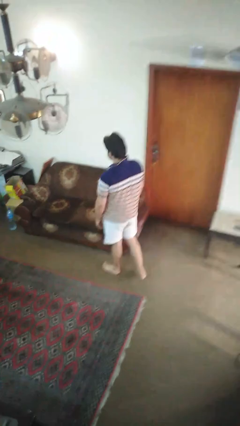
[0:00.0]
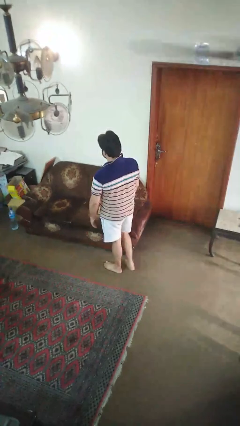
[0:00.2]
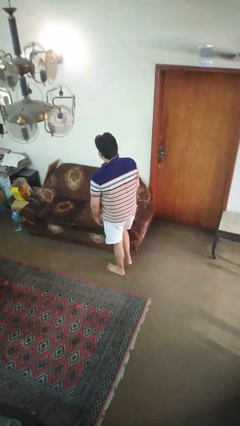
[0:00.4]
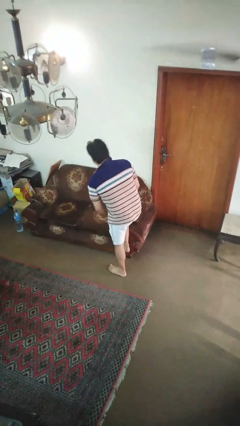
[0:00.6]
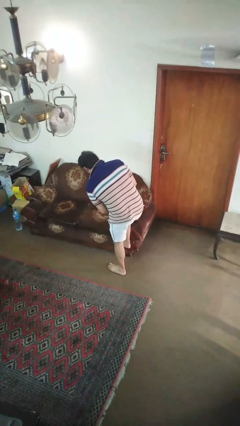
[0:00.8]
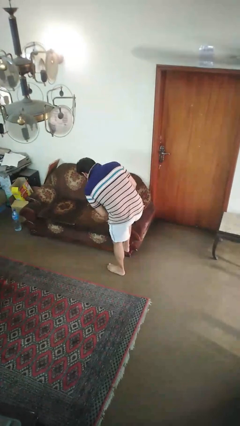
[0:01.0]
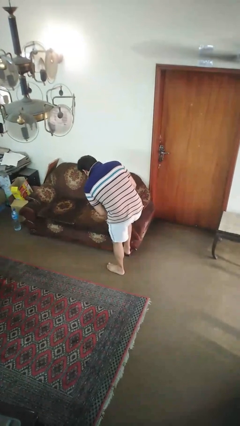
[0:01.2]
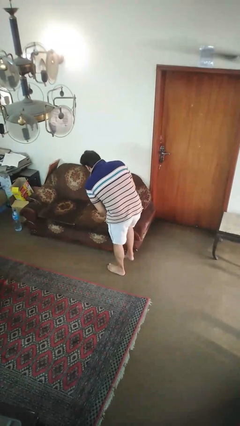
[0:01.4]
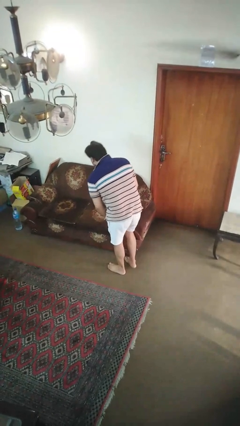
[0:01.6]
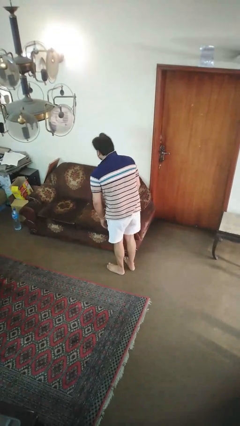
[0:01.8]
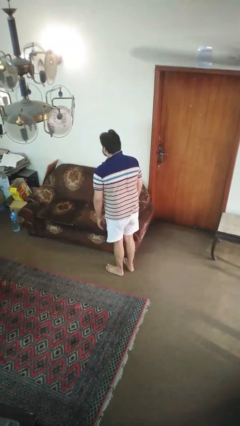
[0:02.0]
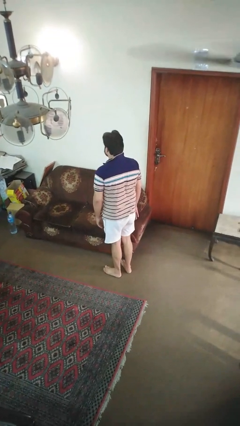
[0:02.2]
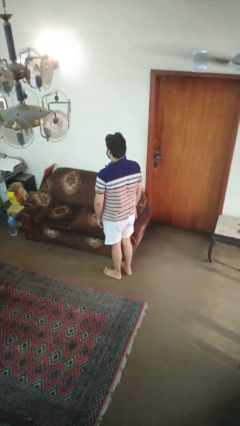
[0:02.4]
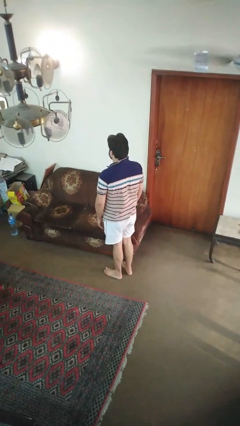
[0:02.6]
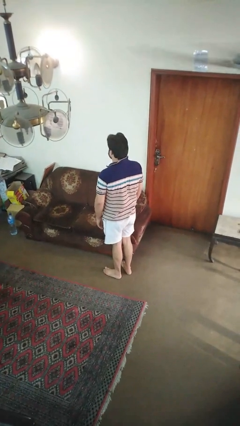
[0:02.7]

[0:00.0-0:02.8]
person stubs toe

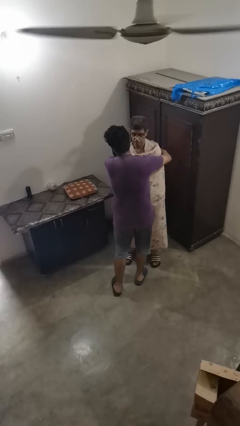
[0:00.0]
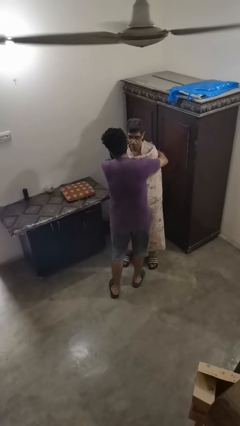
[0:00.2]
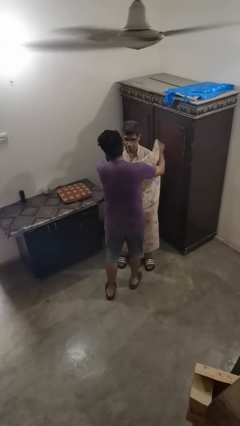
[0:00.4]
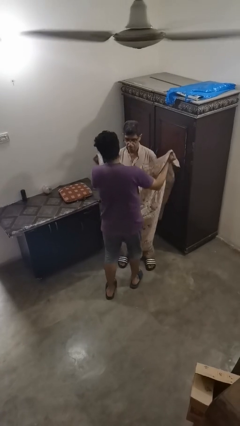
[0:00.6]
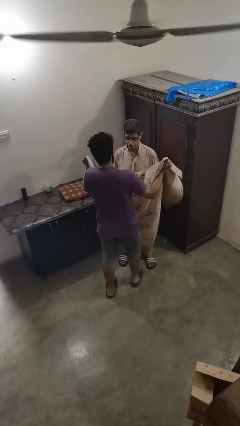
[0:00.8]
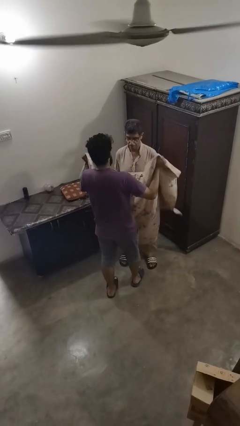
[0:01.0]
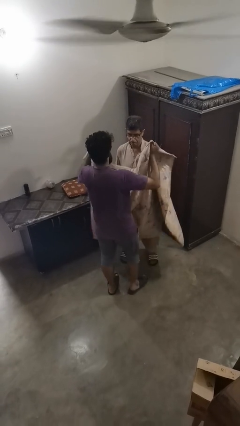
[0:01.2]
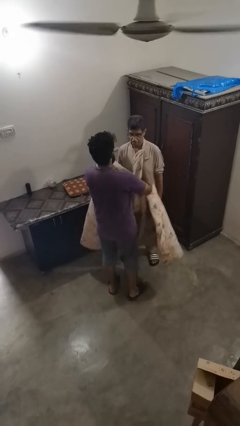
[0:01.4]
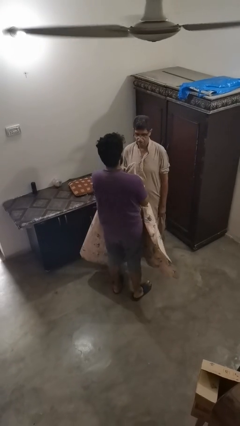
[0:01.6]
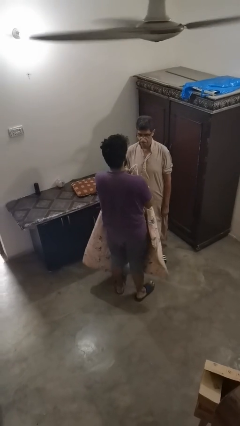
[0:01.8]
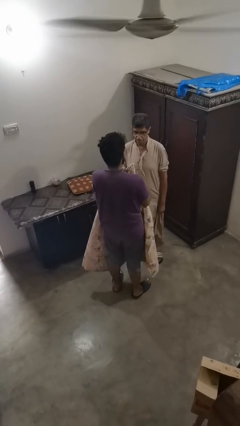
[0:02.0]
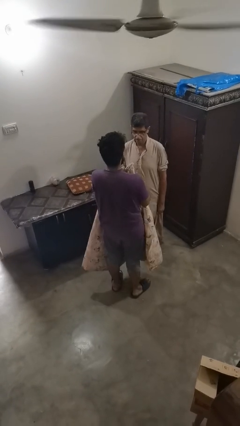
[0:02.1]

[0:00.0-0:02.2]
person uncovers friend with blanket

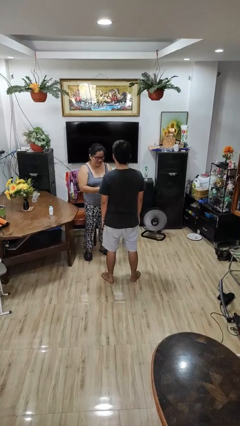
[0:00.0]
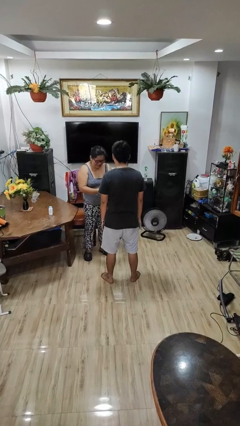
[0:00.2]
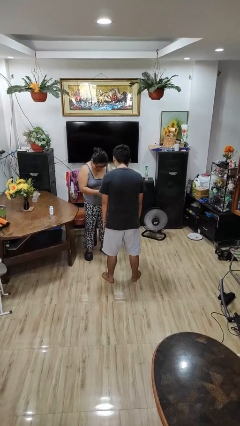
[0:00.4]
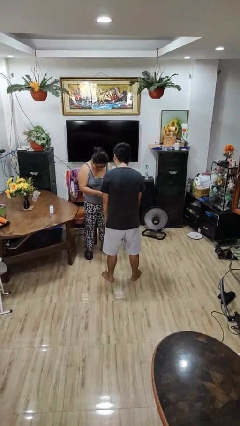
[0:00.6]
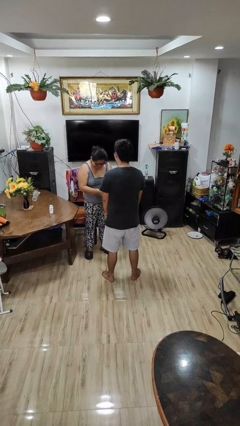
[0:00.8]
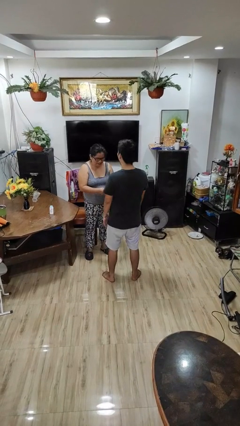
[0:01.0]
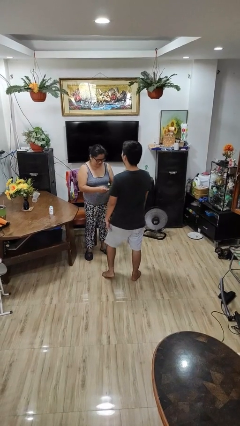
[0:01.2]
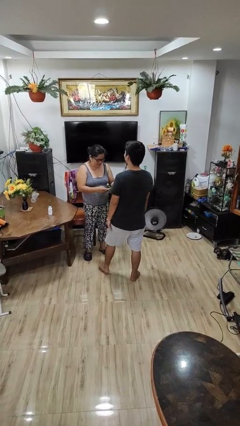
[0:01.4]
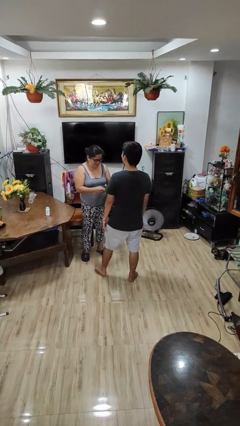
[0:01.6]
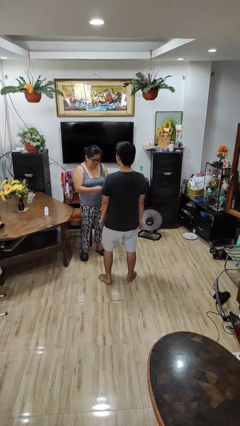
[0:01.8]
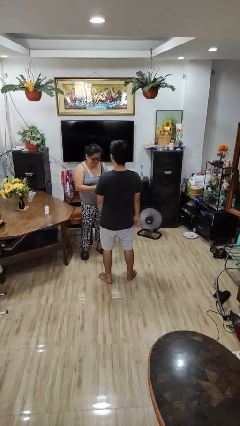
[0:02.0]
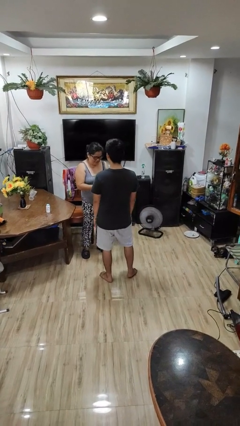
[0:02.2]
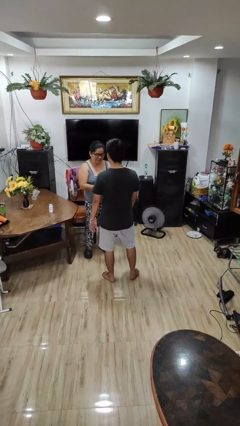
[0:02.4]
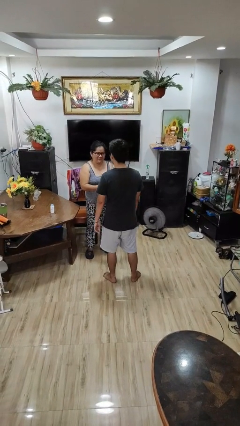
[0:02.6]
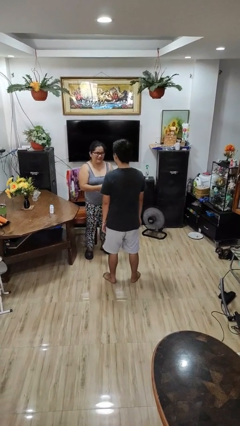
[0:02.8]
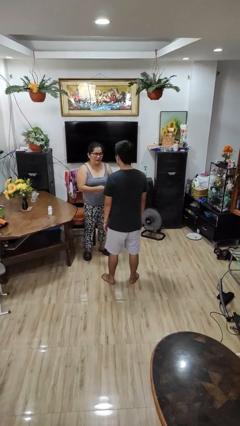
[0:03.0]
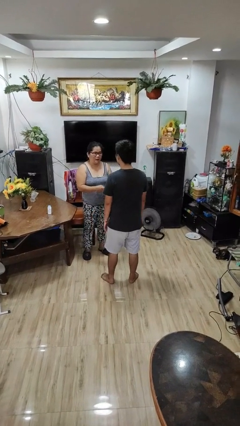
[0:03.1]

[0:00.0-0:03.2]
person laughs with person

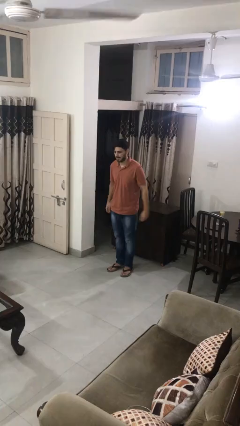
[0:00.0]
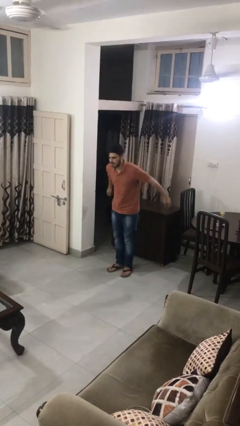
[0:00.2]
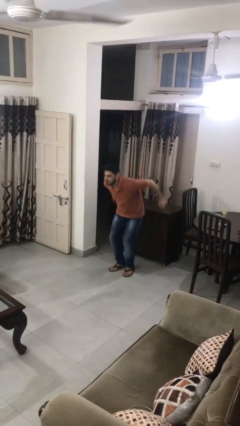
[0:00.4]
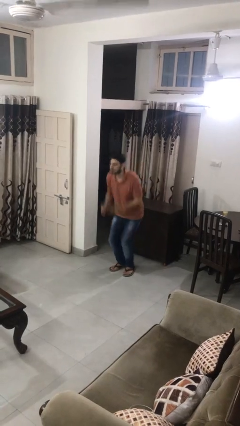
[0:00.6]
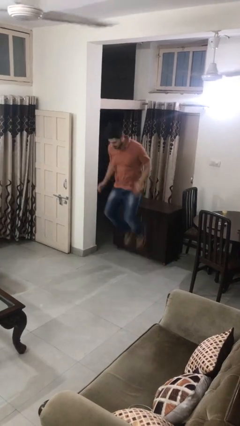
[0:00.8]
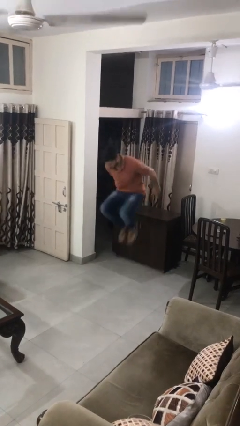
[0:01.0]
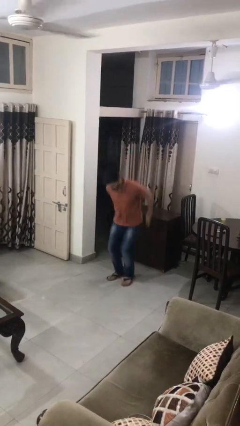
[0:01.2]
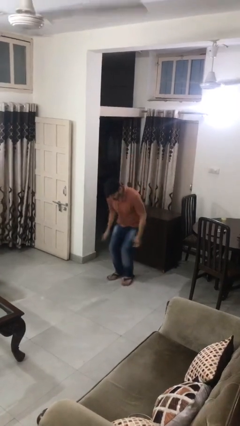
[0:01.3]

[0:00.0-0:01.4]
person jumps

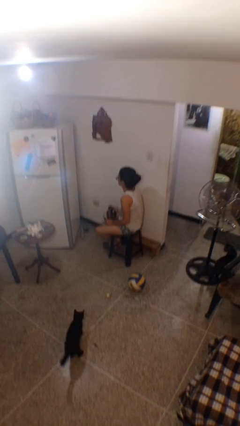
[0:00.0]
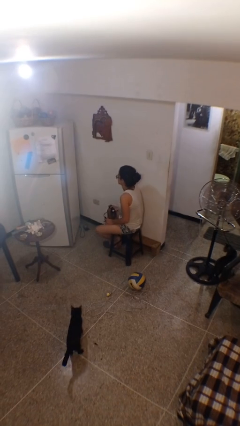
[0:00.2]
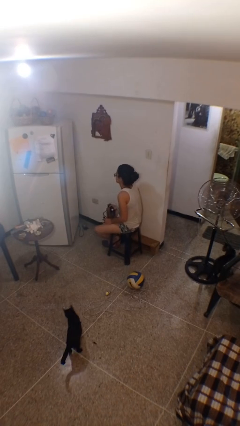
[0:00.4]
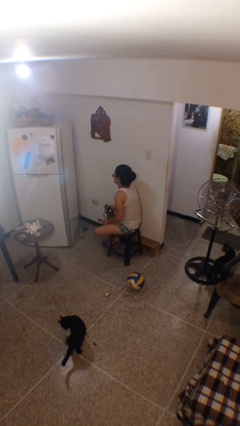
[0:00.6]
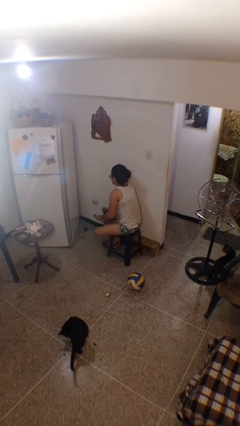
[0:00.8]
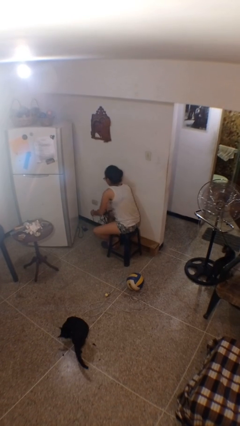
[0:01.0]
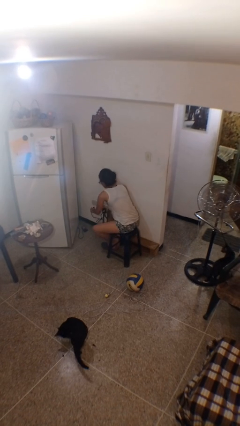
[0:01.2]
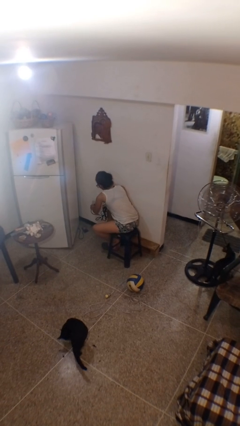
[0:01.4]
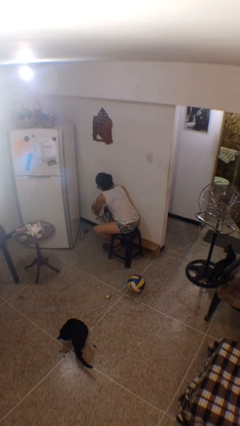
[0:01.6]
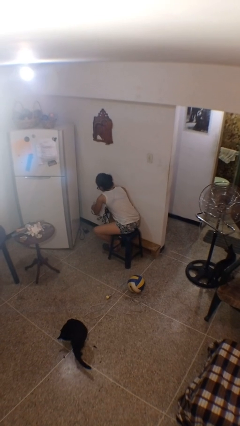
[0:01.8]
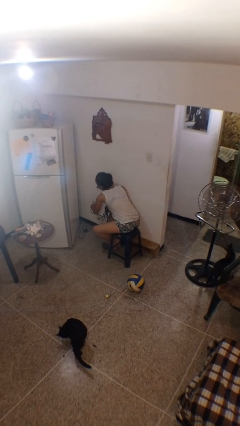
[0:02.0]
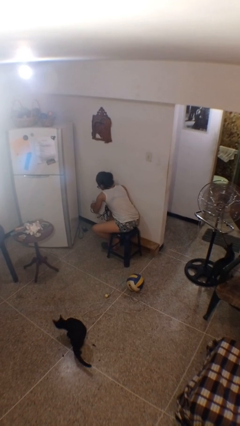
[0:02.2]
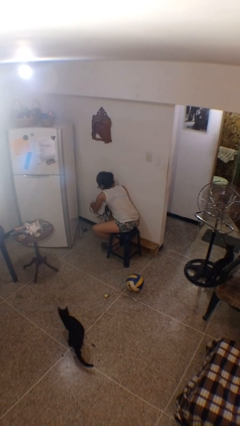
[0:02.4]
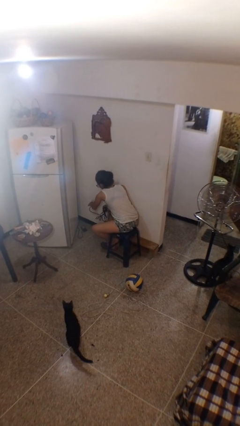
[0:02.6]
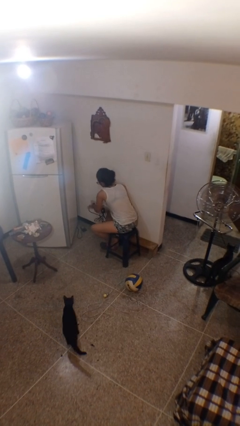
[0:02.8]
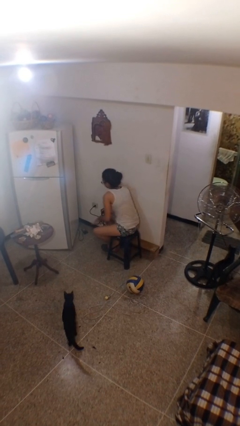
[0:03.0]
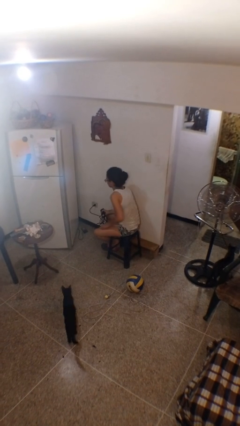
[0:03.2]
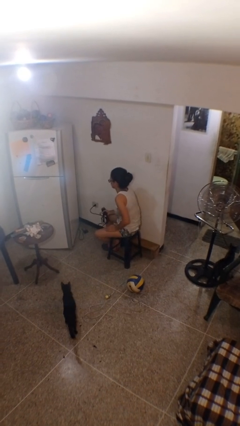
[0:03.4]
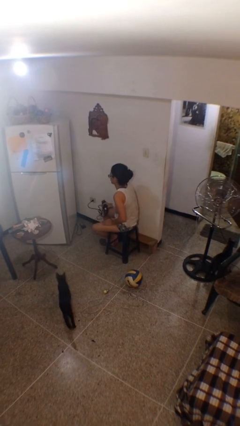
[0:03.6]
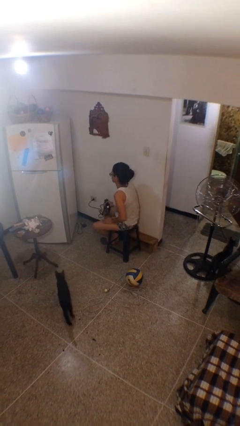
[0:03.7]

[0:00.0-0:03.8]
person plugs into electrical socket

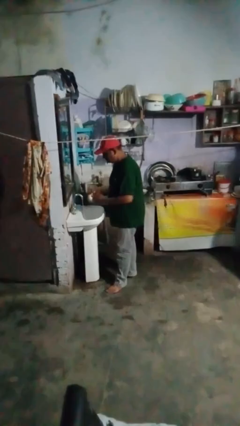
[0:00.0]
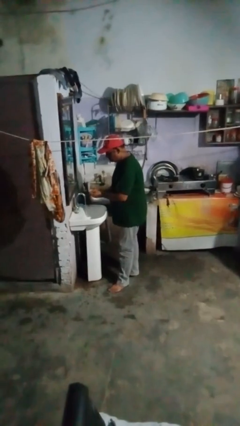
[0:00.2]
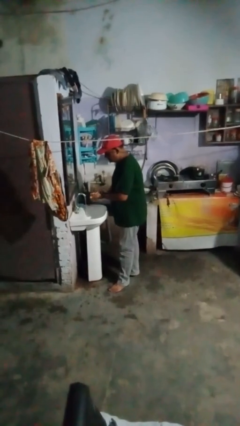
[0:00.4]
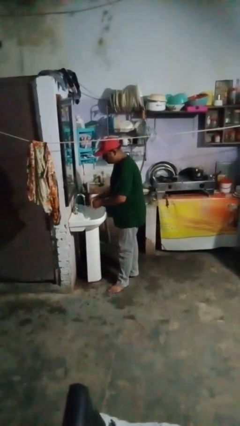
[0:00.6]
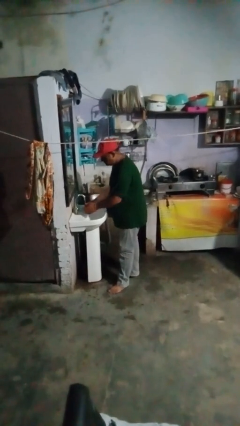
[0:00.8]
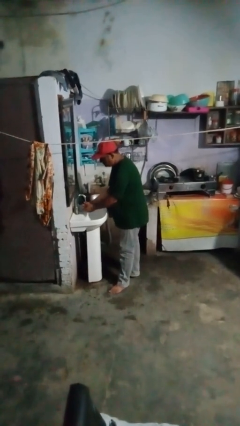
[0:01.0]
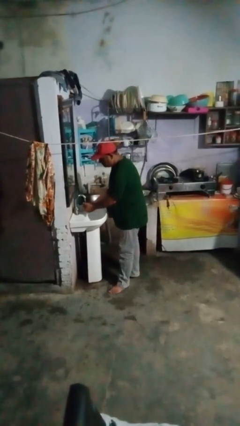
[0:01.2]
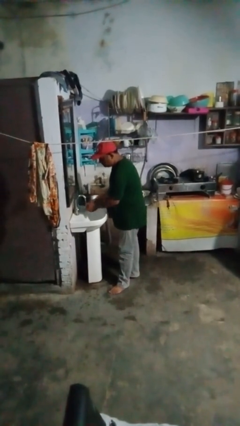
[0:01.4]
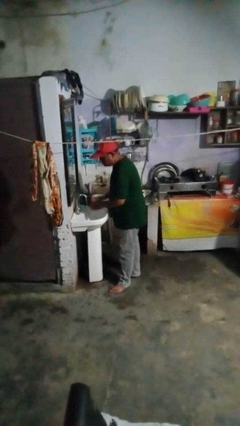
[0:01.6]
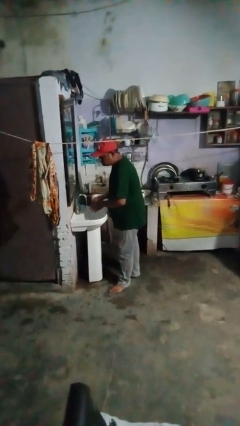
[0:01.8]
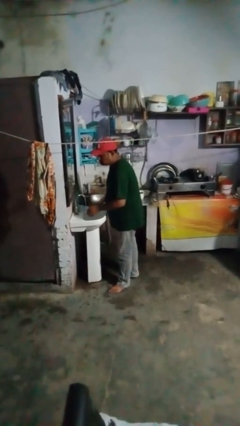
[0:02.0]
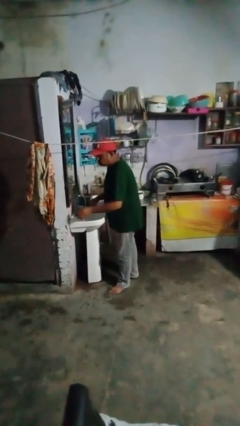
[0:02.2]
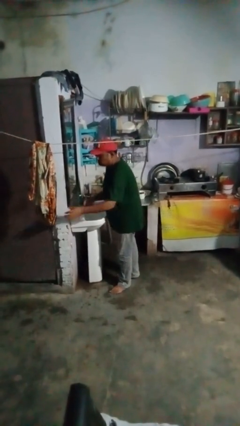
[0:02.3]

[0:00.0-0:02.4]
person washes hands

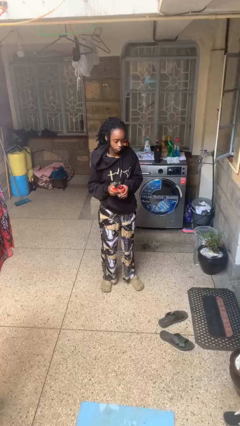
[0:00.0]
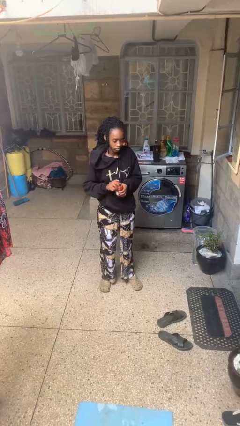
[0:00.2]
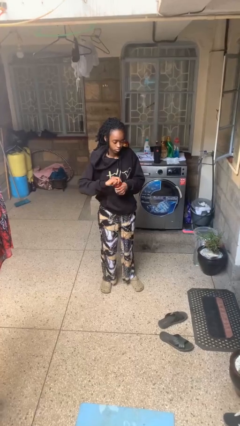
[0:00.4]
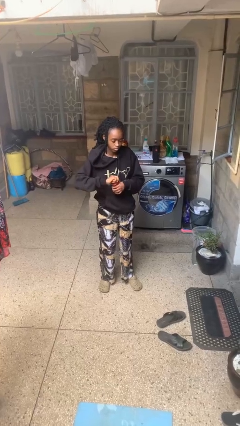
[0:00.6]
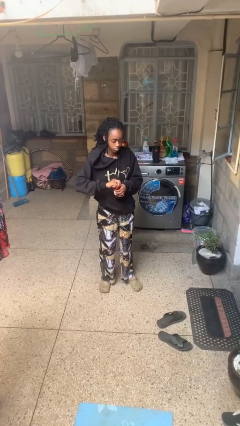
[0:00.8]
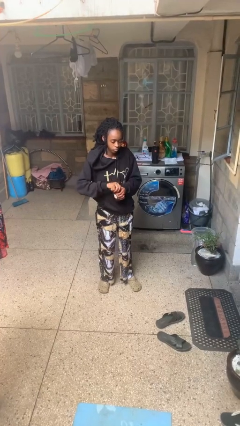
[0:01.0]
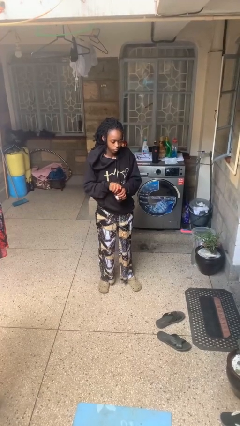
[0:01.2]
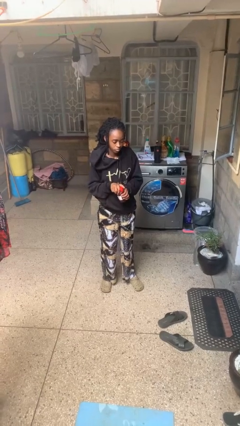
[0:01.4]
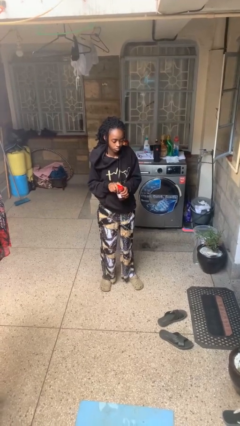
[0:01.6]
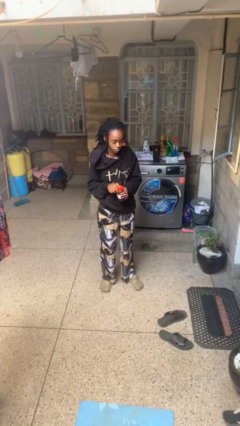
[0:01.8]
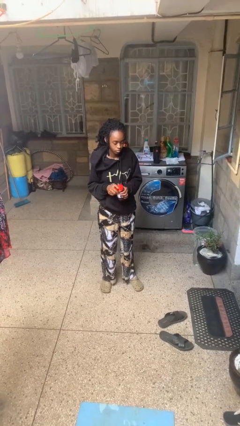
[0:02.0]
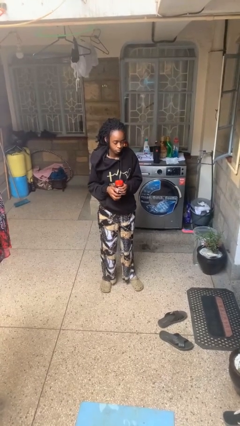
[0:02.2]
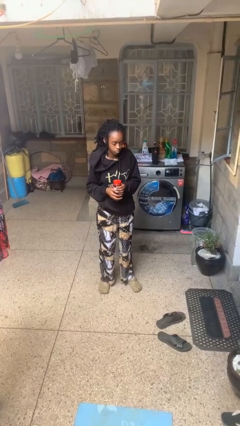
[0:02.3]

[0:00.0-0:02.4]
person closes jar
